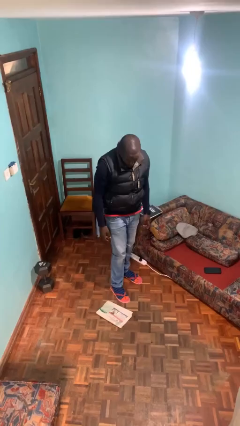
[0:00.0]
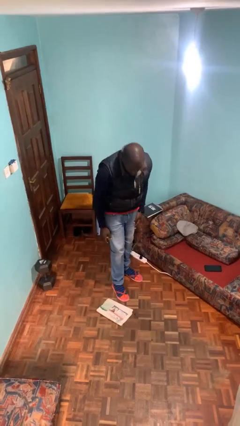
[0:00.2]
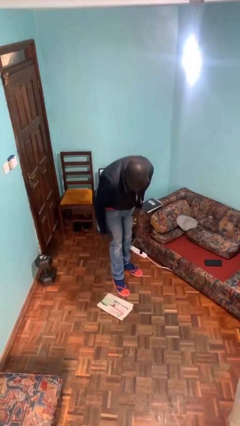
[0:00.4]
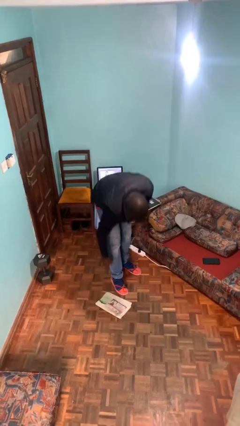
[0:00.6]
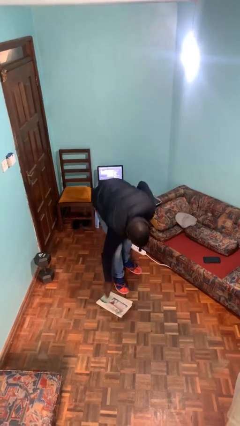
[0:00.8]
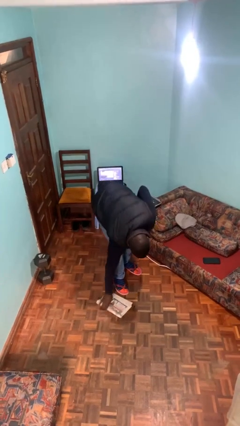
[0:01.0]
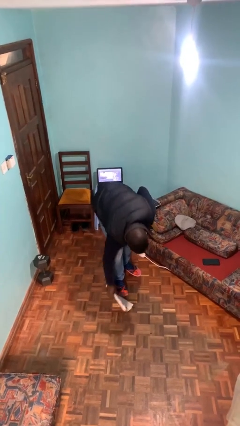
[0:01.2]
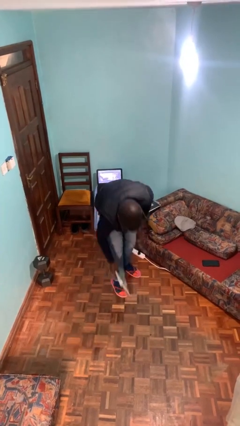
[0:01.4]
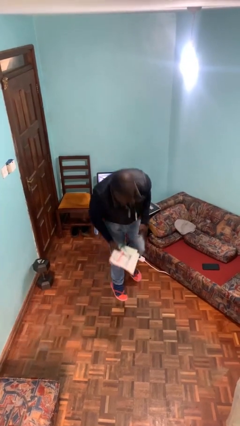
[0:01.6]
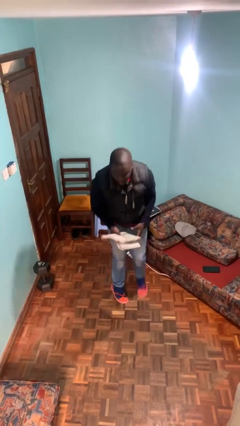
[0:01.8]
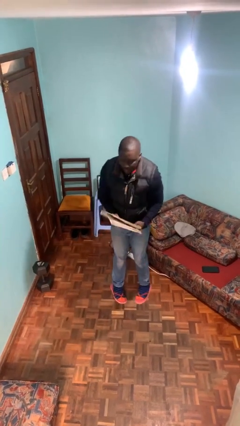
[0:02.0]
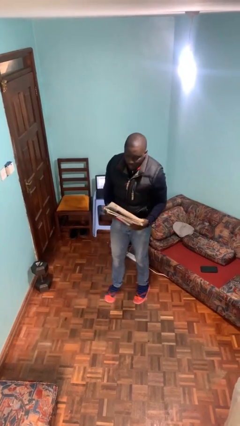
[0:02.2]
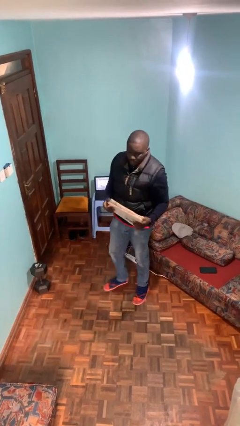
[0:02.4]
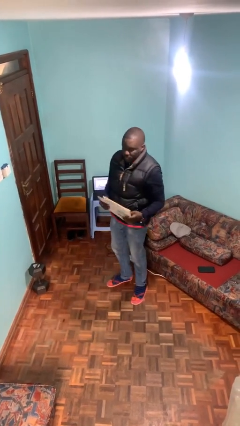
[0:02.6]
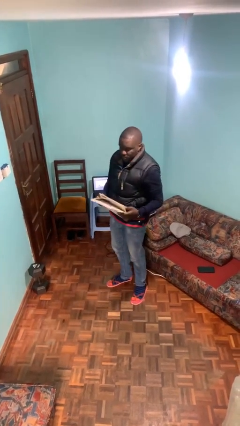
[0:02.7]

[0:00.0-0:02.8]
person picks up object from floor

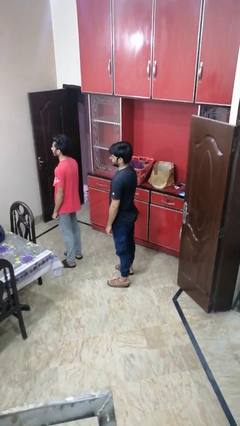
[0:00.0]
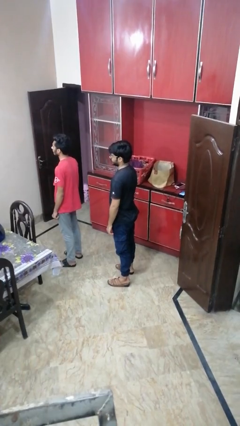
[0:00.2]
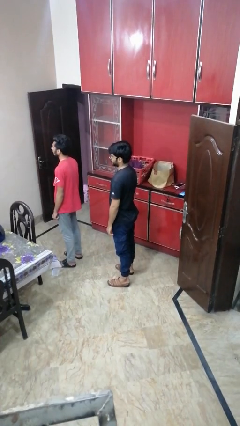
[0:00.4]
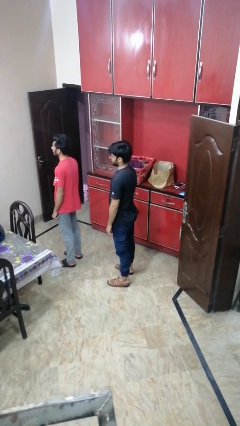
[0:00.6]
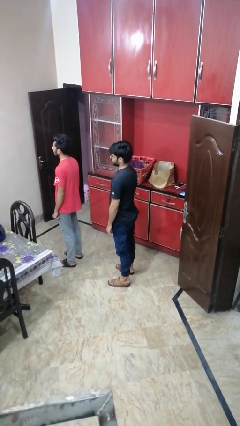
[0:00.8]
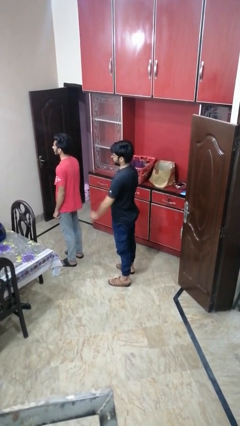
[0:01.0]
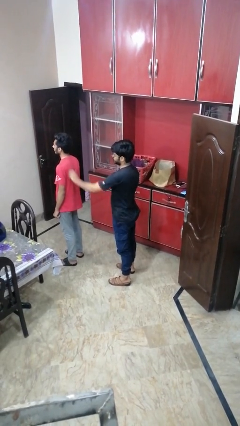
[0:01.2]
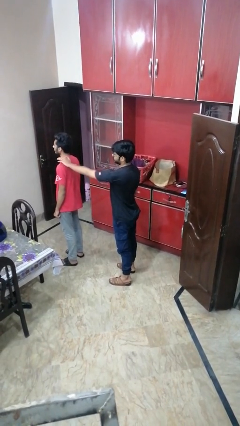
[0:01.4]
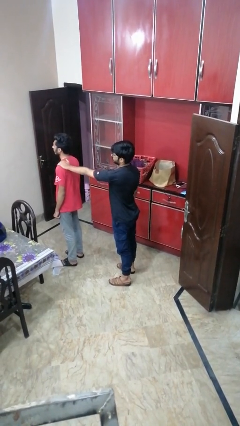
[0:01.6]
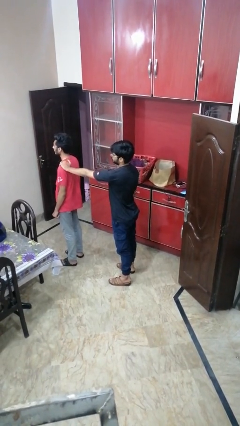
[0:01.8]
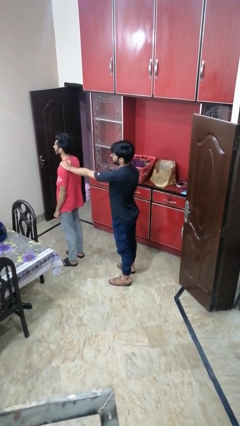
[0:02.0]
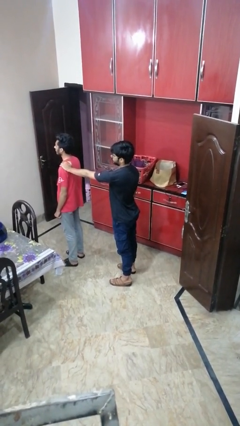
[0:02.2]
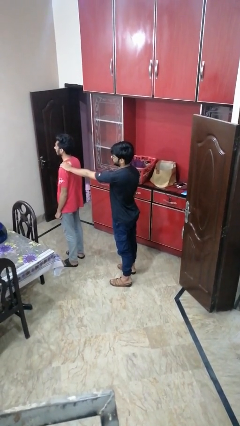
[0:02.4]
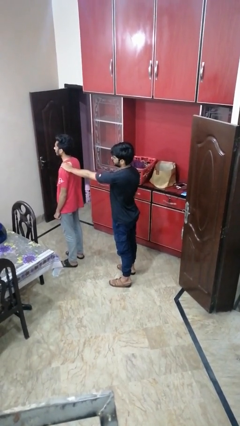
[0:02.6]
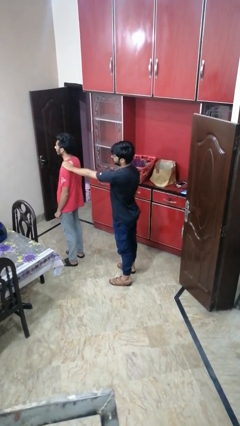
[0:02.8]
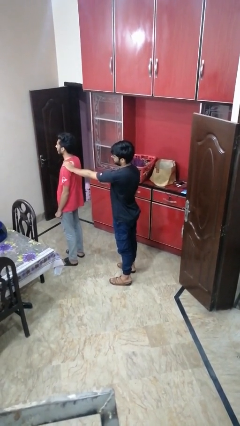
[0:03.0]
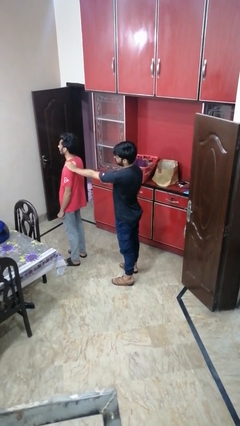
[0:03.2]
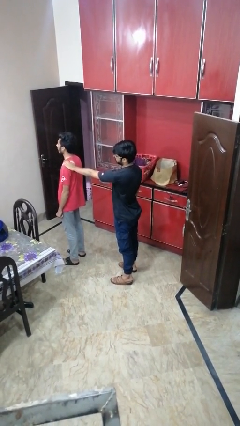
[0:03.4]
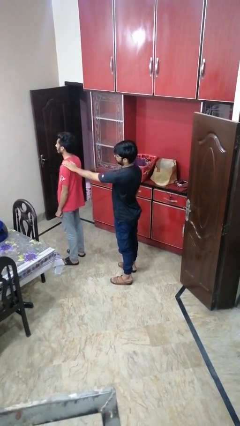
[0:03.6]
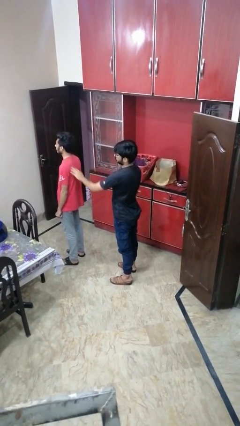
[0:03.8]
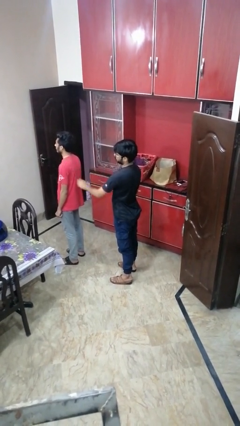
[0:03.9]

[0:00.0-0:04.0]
person touches back of person

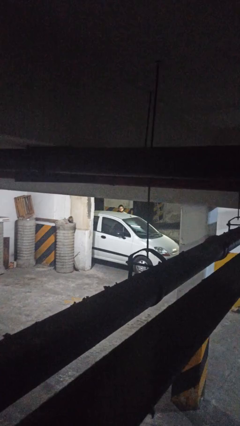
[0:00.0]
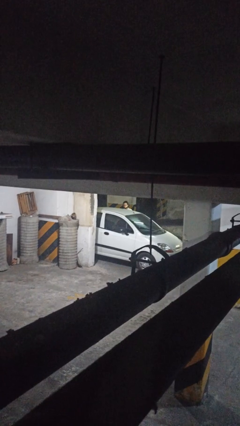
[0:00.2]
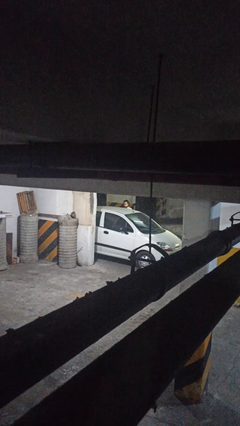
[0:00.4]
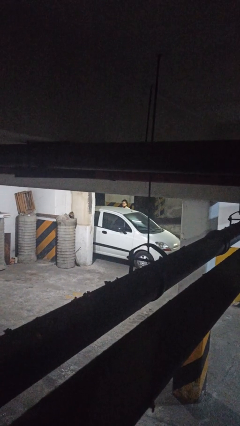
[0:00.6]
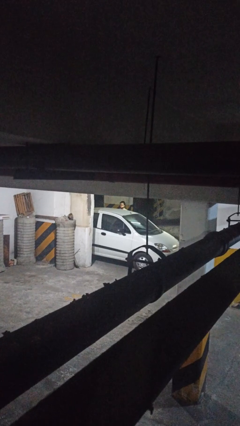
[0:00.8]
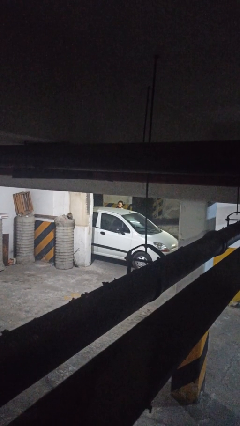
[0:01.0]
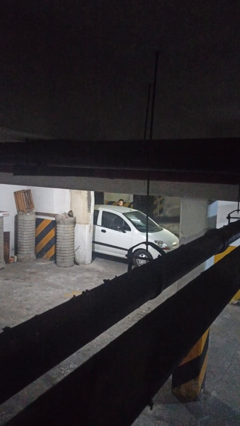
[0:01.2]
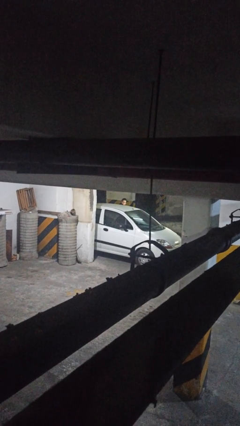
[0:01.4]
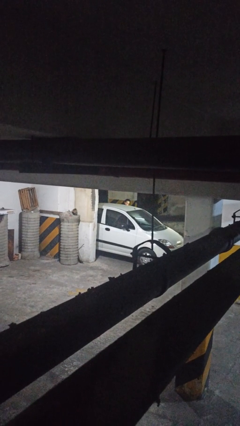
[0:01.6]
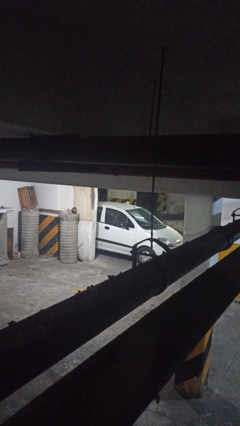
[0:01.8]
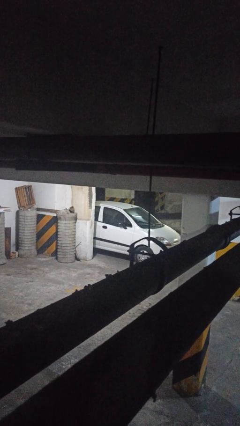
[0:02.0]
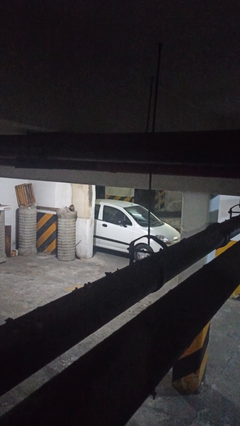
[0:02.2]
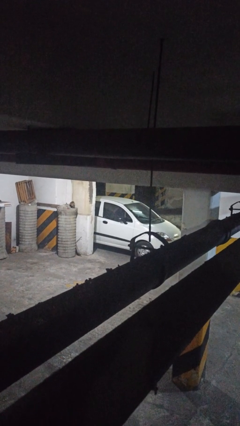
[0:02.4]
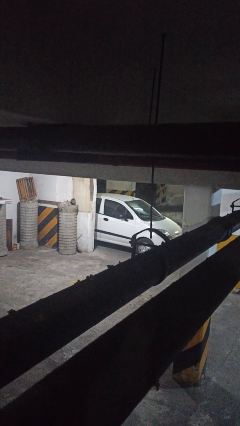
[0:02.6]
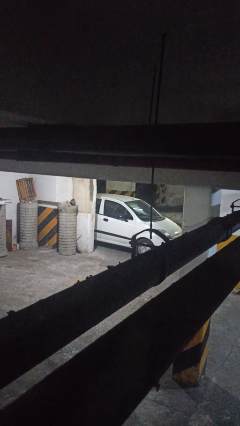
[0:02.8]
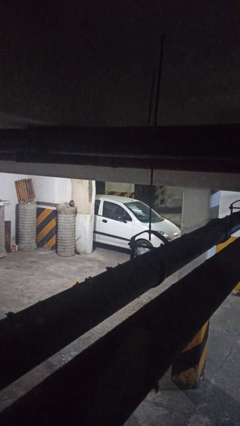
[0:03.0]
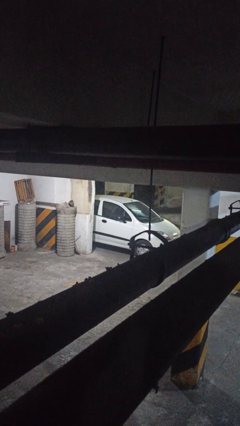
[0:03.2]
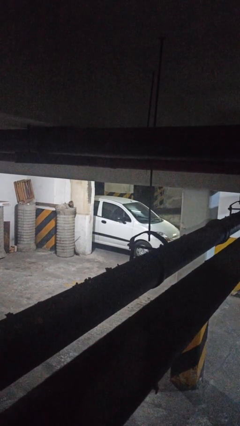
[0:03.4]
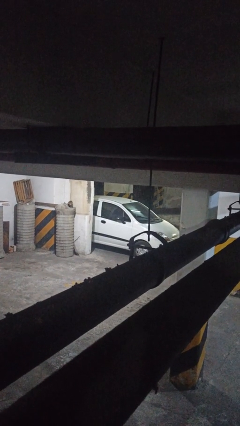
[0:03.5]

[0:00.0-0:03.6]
person enters car

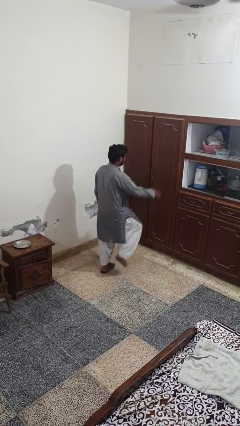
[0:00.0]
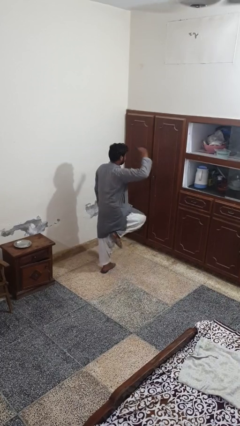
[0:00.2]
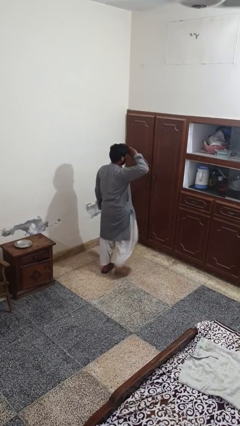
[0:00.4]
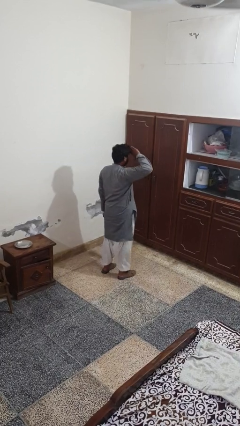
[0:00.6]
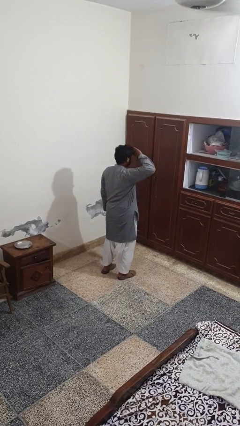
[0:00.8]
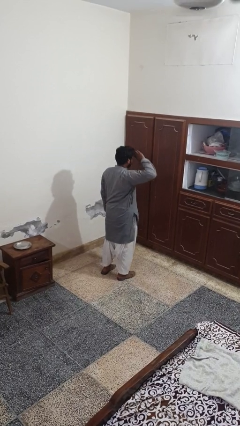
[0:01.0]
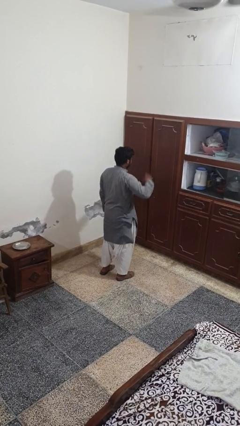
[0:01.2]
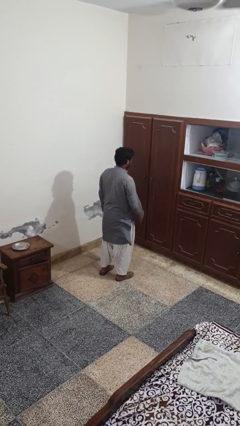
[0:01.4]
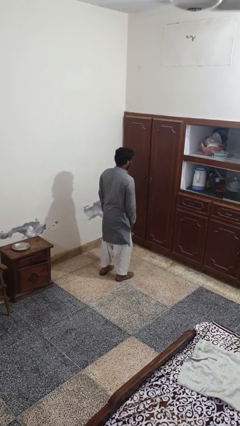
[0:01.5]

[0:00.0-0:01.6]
person salutes

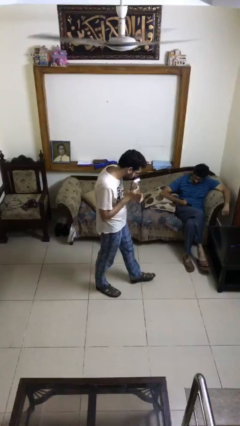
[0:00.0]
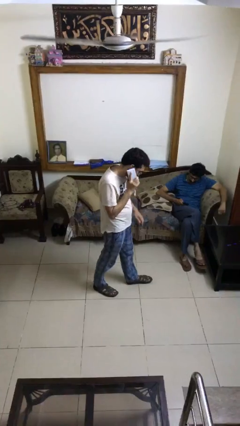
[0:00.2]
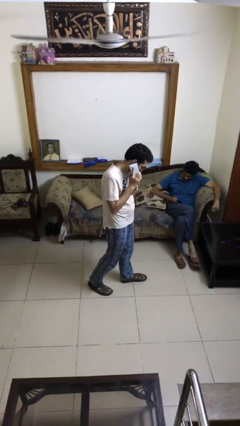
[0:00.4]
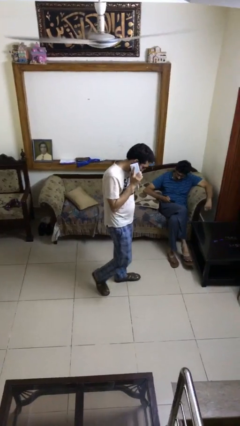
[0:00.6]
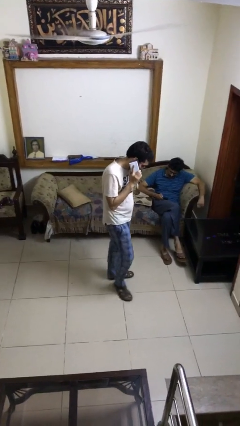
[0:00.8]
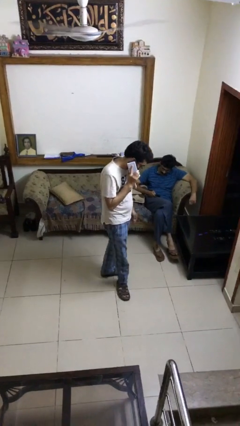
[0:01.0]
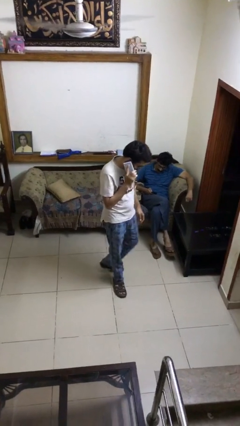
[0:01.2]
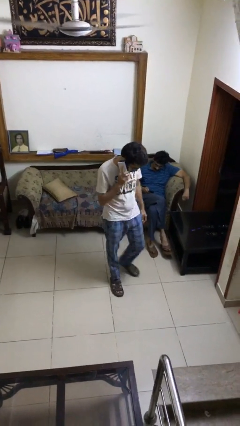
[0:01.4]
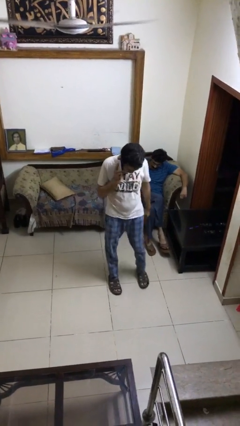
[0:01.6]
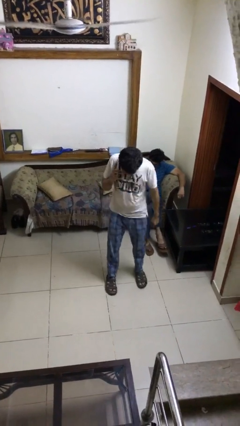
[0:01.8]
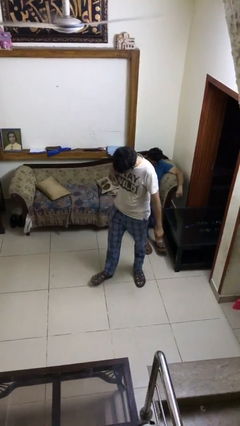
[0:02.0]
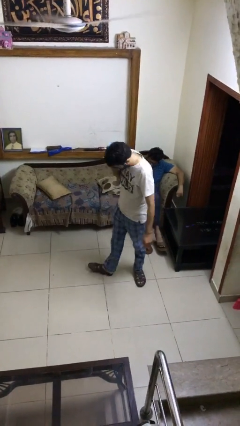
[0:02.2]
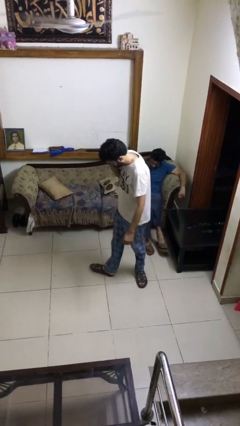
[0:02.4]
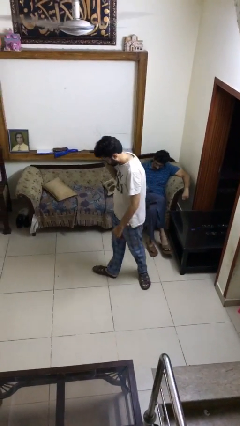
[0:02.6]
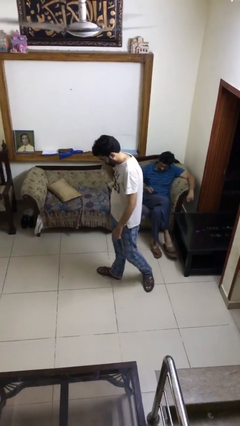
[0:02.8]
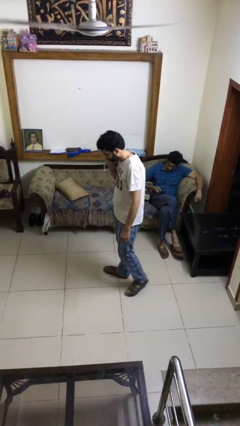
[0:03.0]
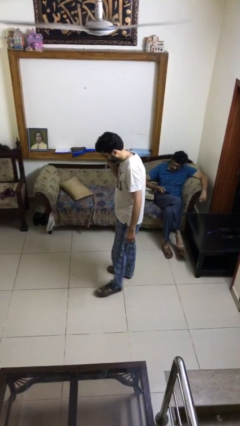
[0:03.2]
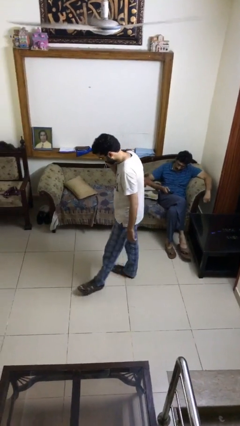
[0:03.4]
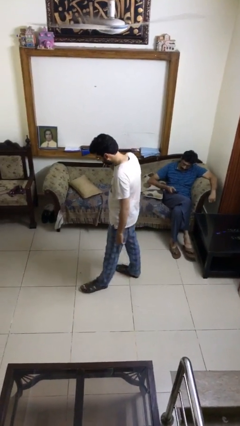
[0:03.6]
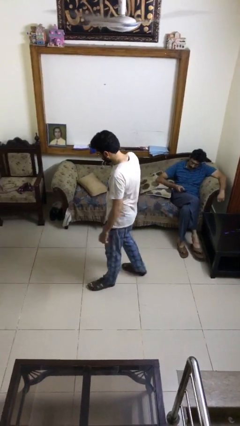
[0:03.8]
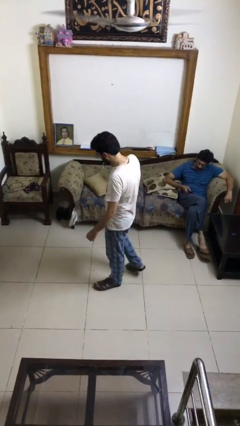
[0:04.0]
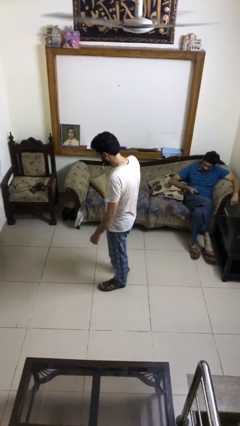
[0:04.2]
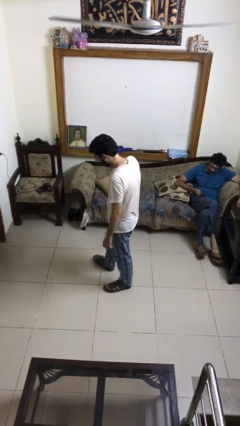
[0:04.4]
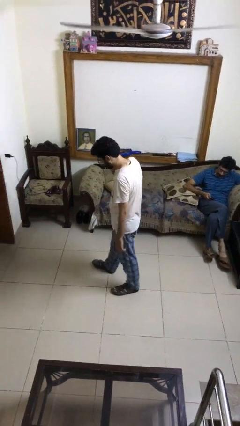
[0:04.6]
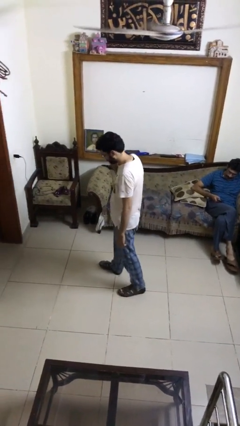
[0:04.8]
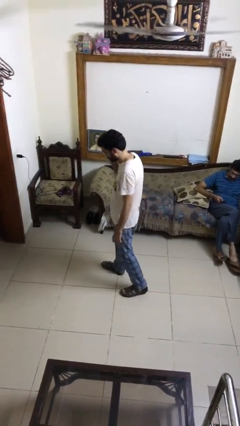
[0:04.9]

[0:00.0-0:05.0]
person talks on phone

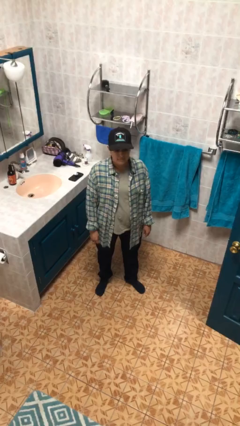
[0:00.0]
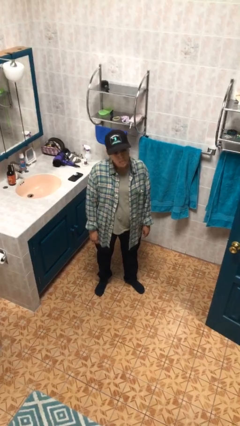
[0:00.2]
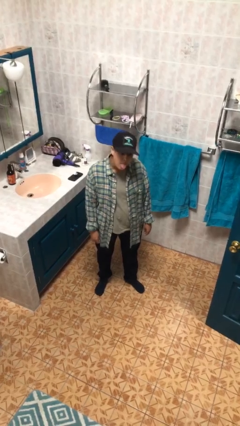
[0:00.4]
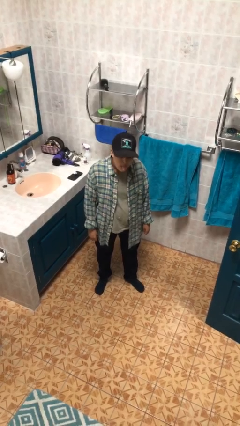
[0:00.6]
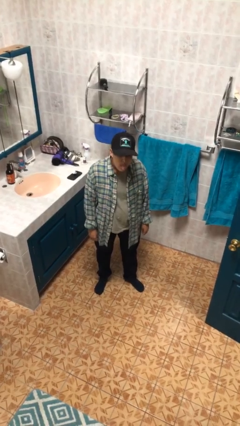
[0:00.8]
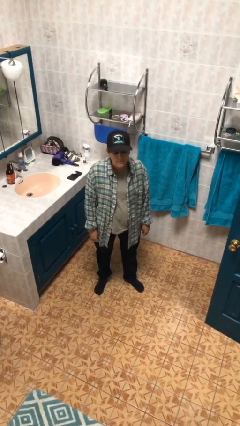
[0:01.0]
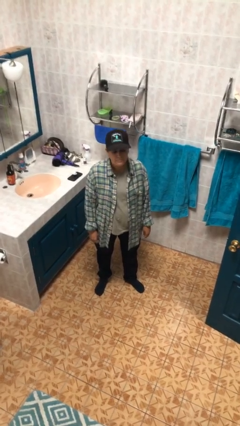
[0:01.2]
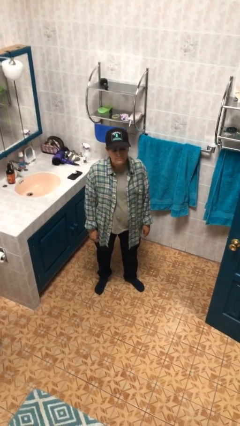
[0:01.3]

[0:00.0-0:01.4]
person sticks out tongue
